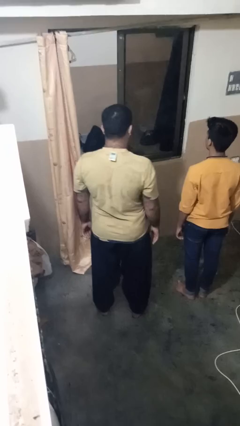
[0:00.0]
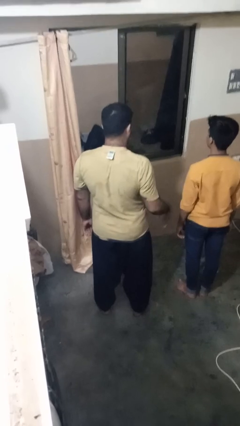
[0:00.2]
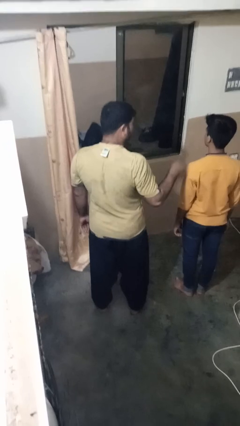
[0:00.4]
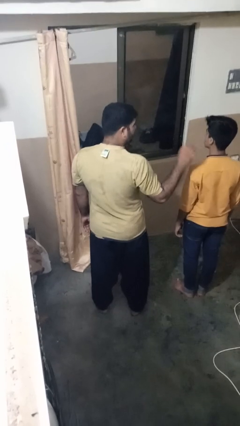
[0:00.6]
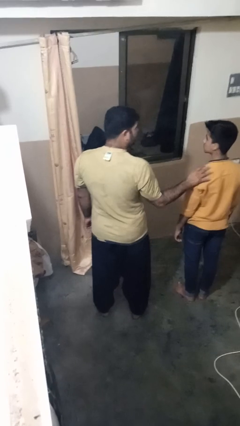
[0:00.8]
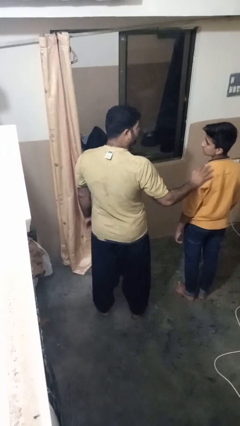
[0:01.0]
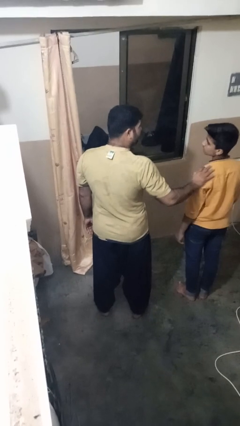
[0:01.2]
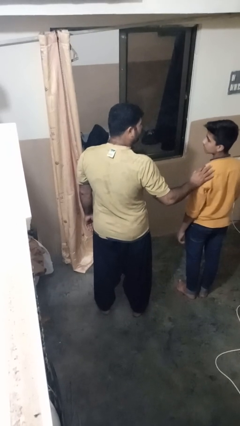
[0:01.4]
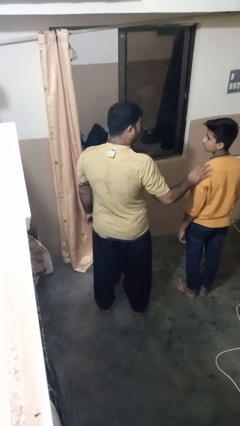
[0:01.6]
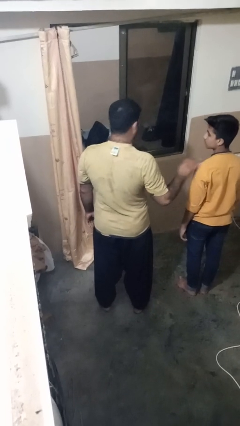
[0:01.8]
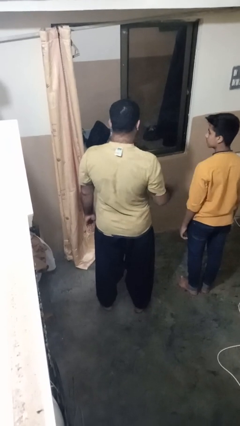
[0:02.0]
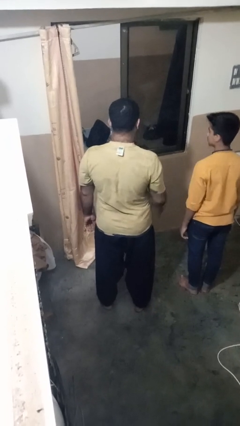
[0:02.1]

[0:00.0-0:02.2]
person pounds shoulders of person

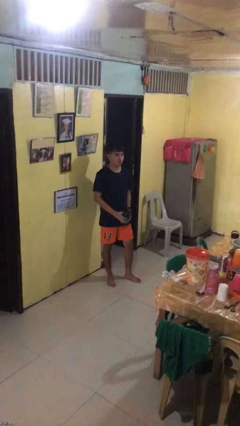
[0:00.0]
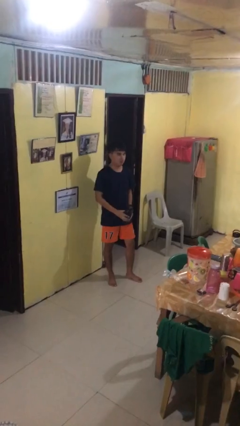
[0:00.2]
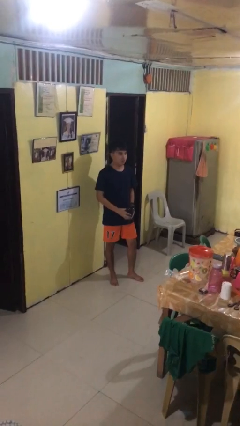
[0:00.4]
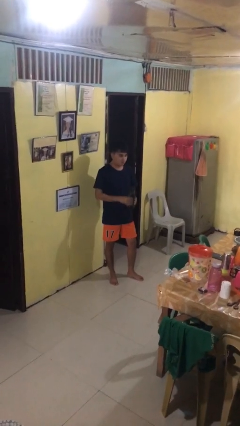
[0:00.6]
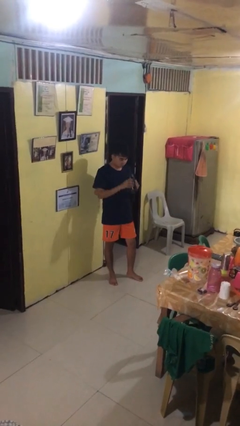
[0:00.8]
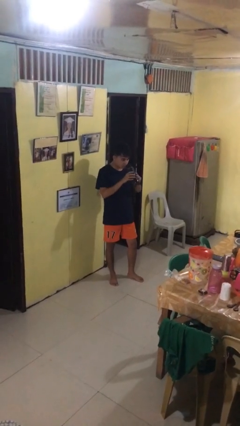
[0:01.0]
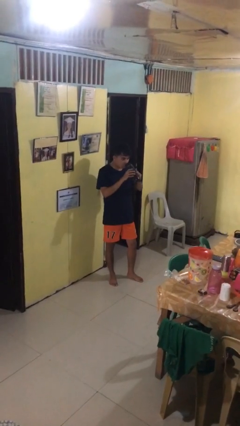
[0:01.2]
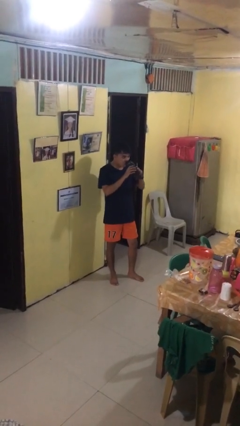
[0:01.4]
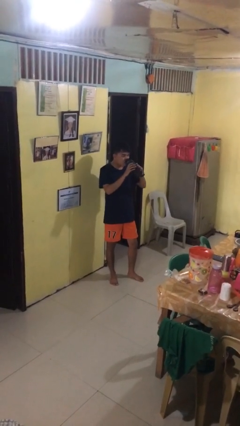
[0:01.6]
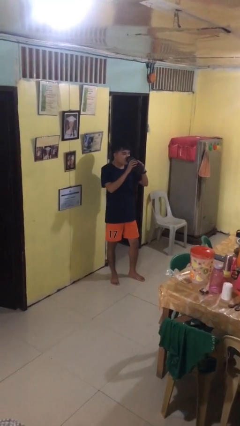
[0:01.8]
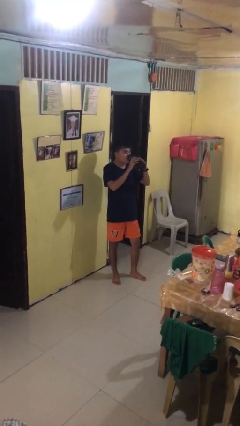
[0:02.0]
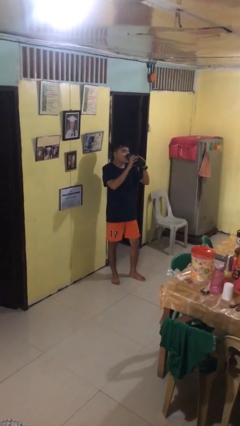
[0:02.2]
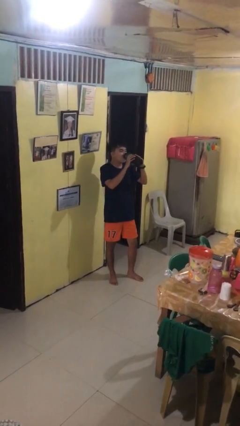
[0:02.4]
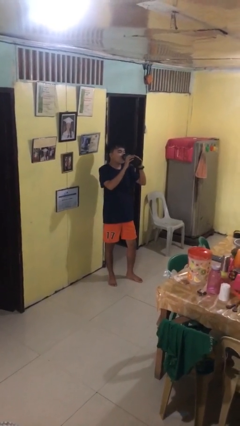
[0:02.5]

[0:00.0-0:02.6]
person drinks from bottle

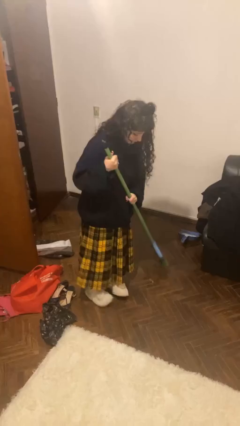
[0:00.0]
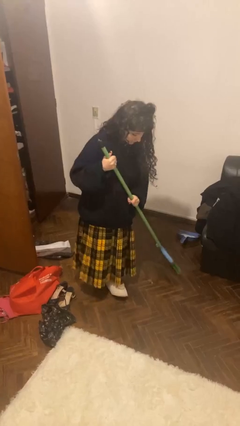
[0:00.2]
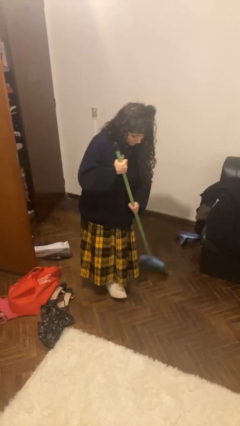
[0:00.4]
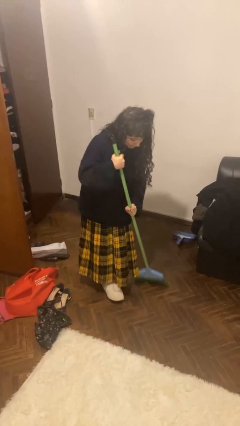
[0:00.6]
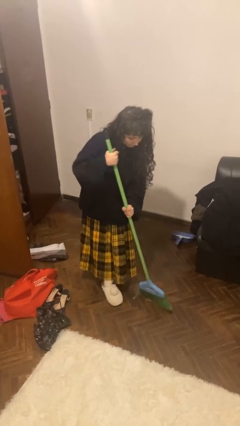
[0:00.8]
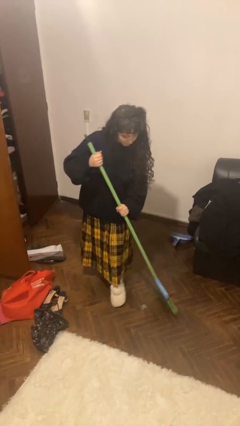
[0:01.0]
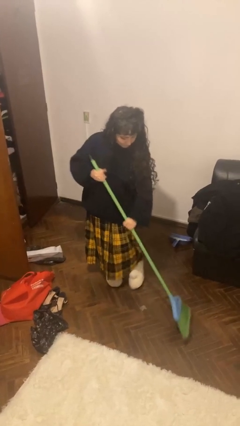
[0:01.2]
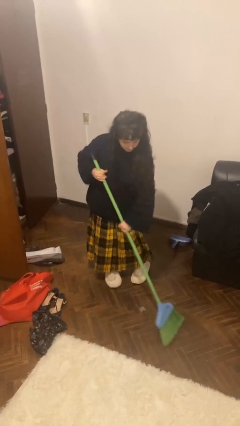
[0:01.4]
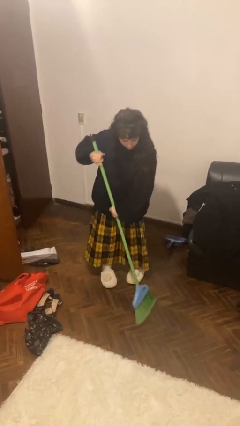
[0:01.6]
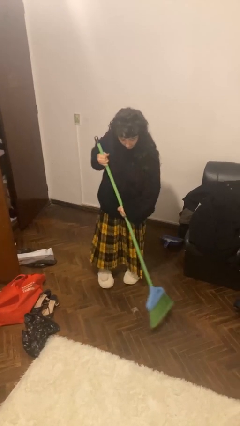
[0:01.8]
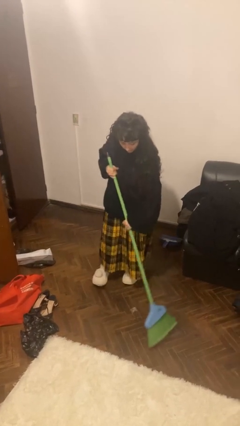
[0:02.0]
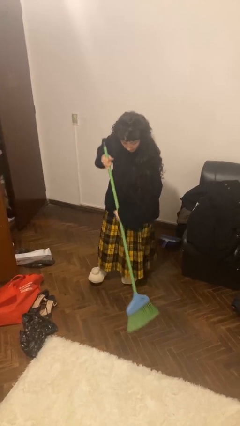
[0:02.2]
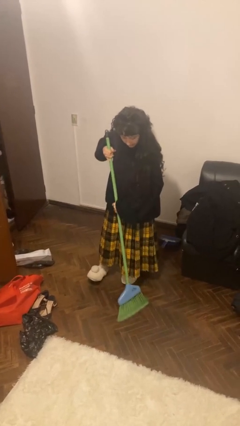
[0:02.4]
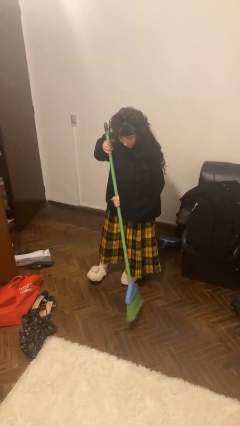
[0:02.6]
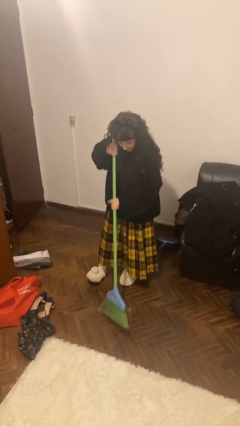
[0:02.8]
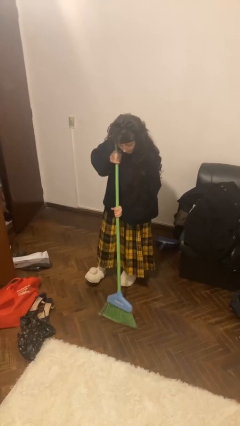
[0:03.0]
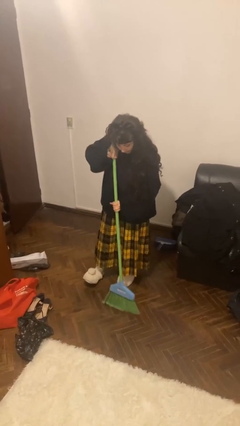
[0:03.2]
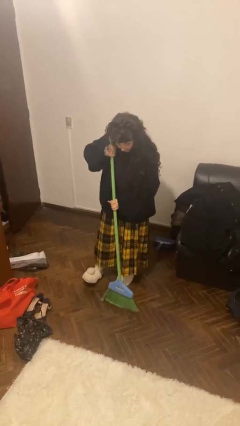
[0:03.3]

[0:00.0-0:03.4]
person sweeps floor

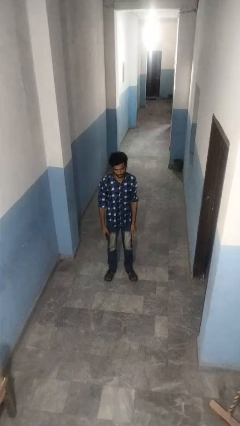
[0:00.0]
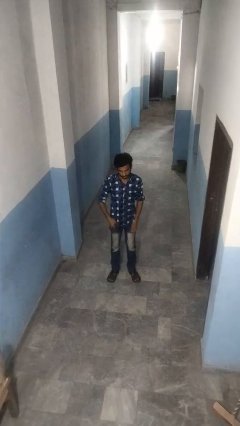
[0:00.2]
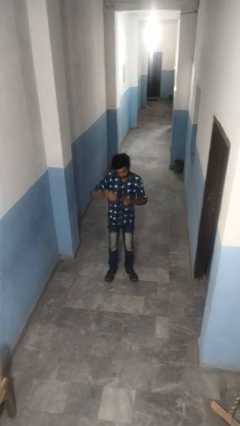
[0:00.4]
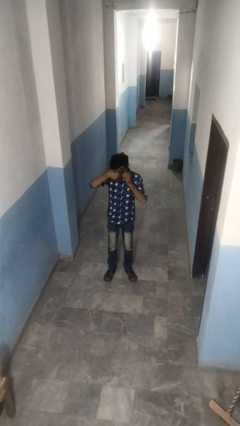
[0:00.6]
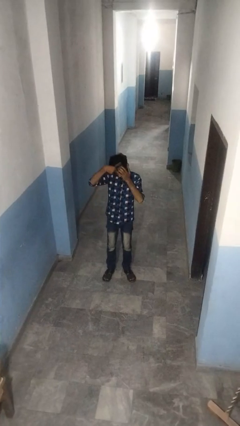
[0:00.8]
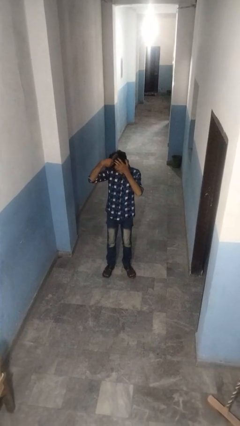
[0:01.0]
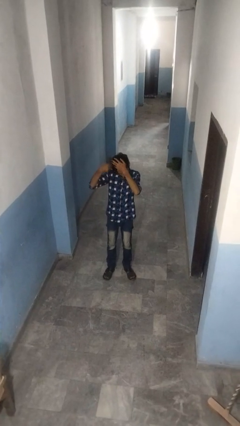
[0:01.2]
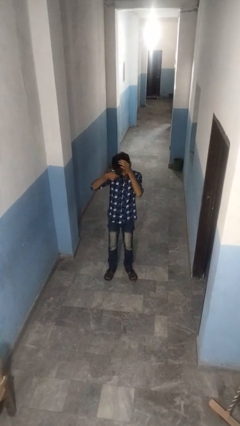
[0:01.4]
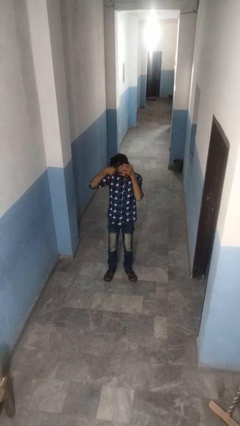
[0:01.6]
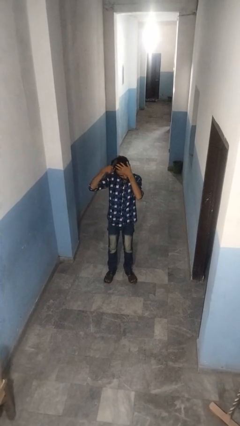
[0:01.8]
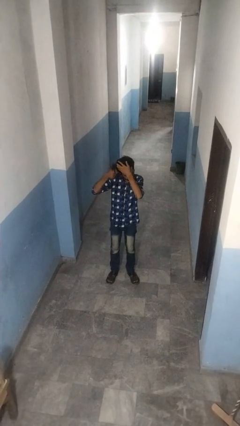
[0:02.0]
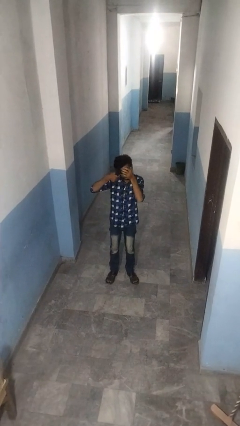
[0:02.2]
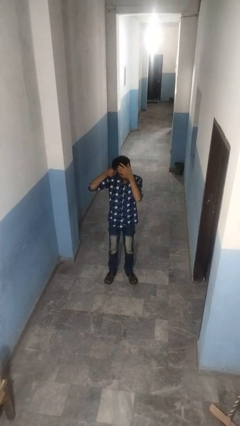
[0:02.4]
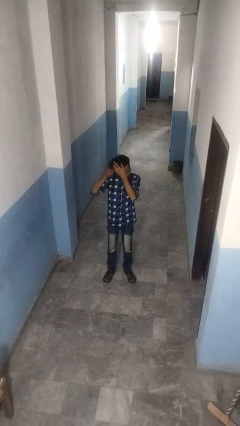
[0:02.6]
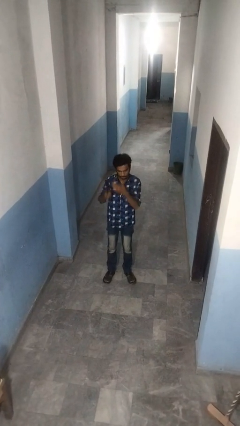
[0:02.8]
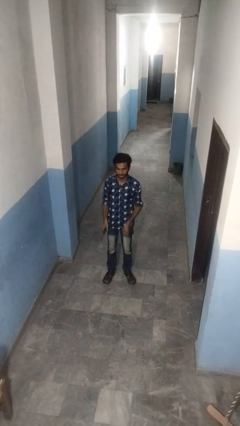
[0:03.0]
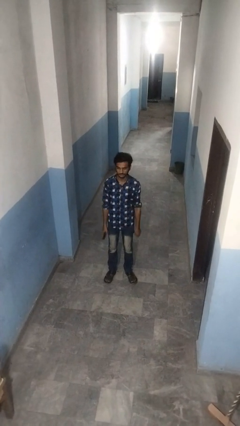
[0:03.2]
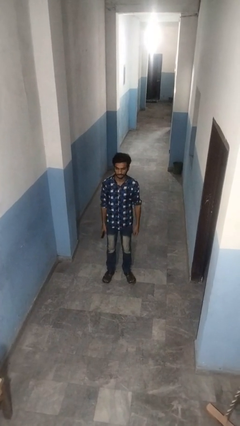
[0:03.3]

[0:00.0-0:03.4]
person brushes hair

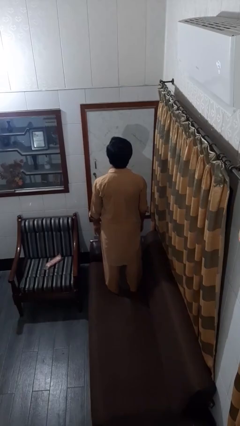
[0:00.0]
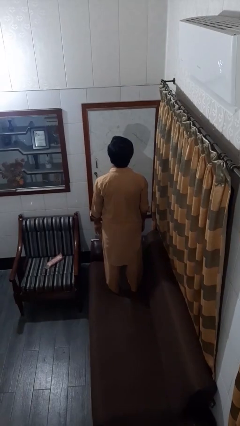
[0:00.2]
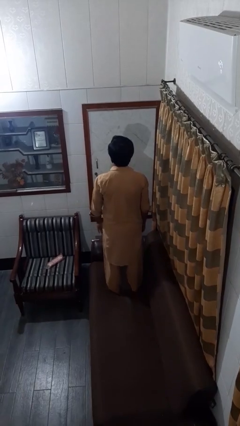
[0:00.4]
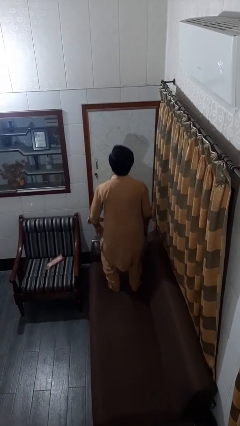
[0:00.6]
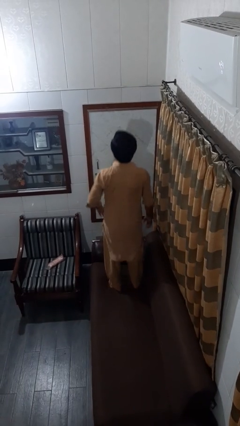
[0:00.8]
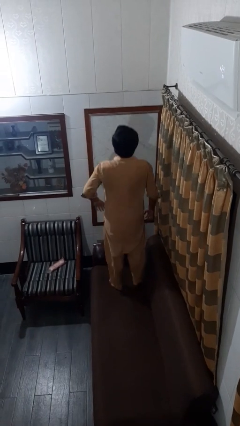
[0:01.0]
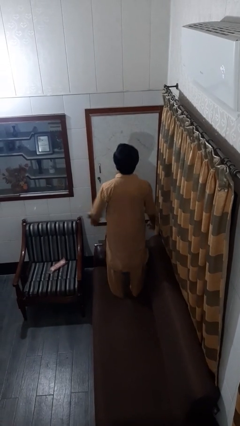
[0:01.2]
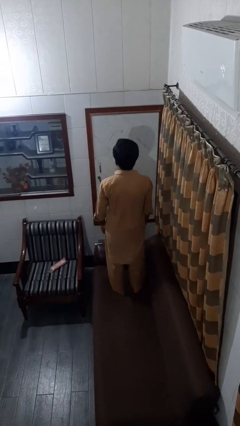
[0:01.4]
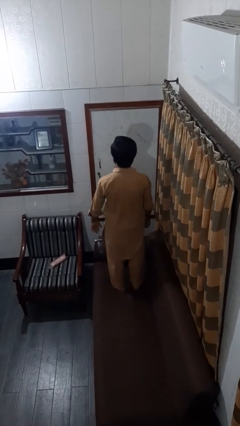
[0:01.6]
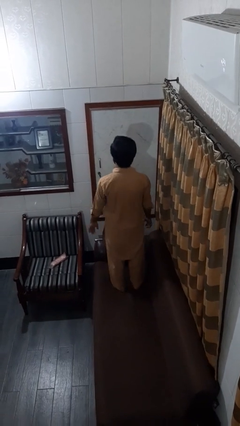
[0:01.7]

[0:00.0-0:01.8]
person jumps on couch

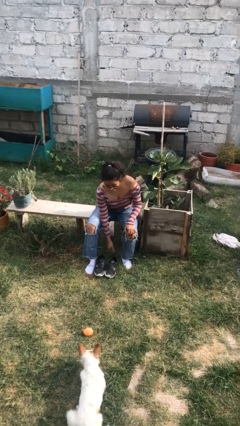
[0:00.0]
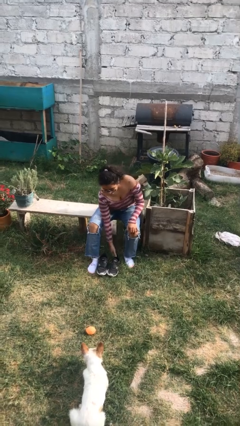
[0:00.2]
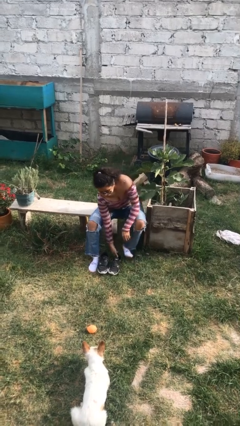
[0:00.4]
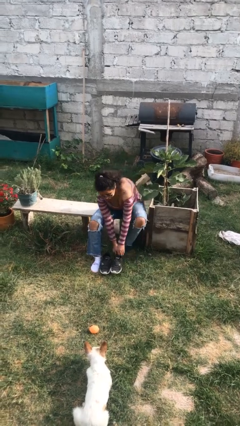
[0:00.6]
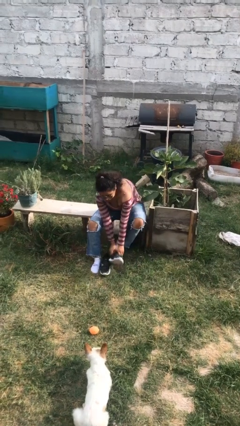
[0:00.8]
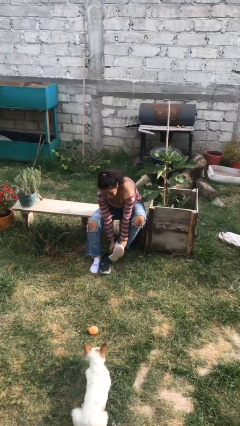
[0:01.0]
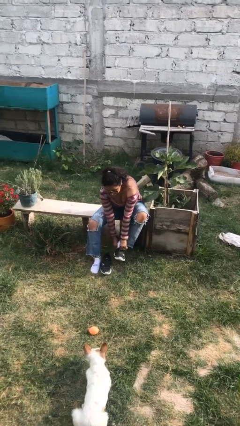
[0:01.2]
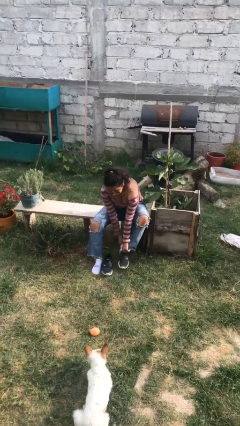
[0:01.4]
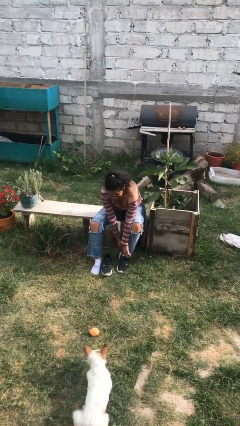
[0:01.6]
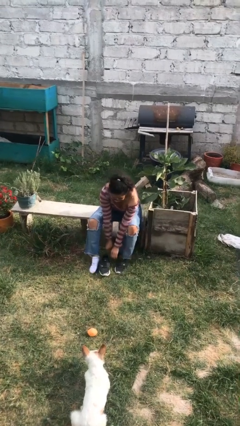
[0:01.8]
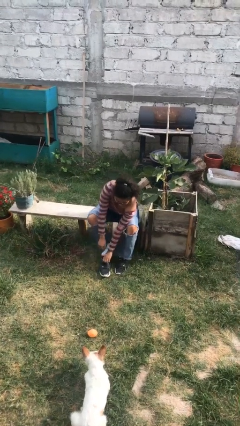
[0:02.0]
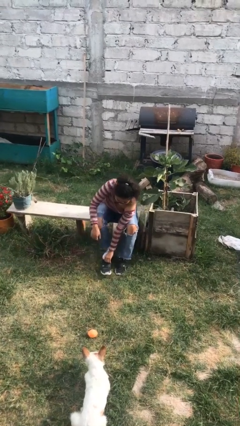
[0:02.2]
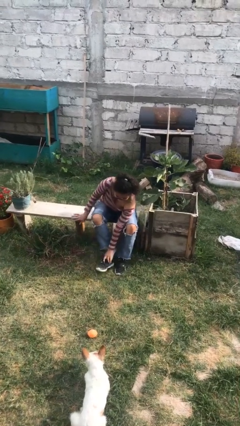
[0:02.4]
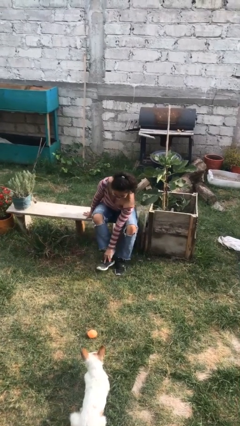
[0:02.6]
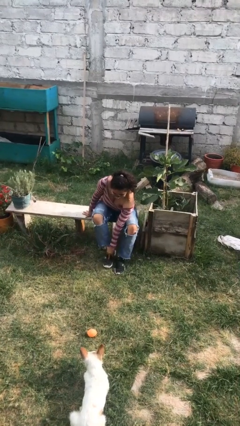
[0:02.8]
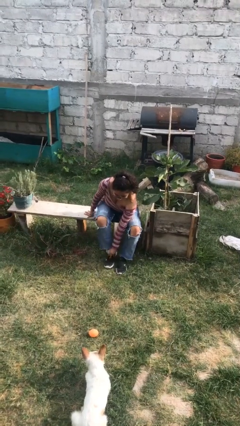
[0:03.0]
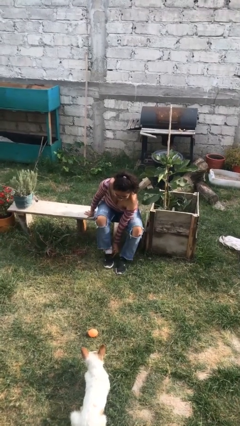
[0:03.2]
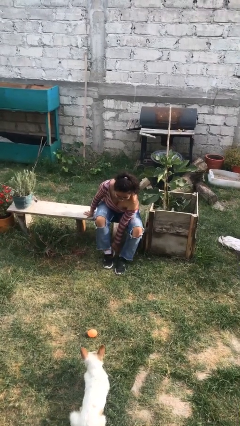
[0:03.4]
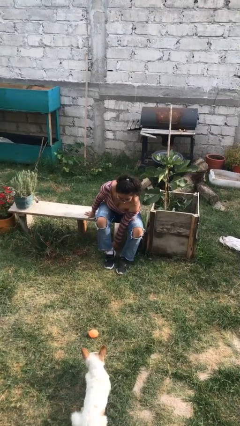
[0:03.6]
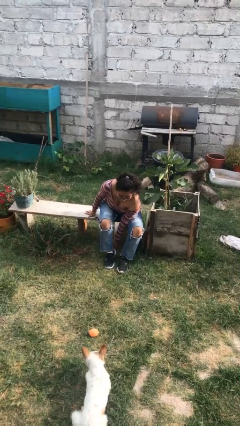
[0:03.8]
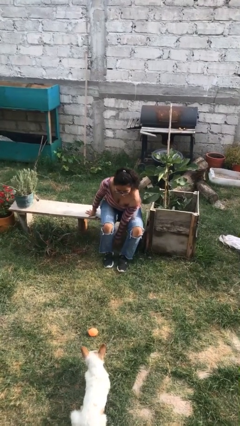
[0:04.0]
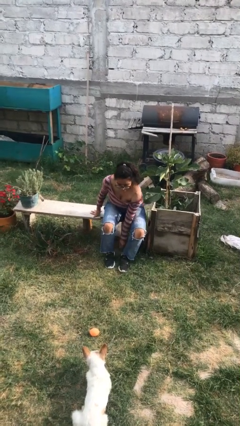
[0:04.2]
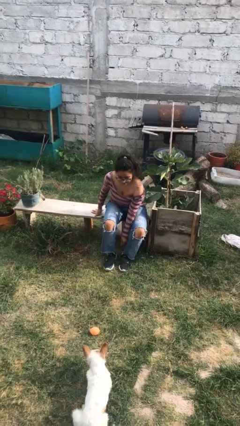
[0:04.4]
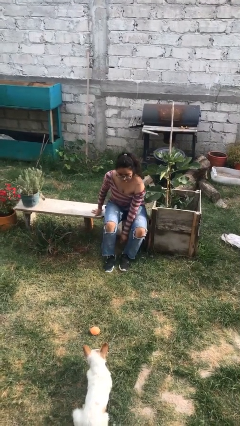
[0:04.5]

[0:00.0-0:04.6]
person puts on shoes
